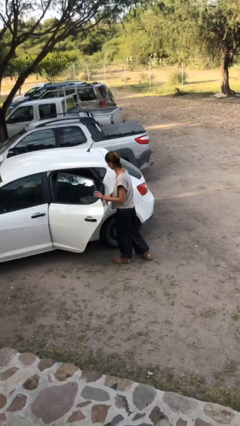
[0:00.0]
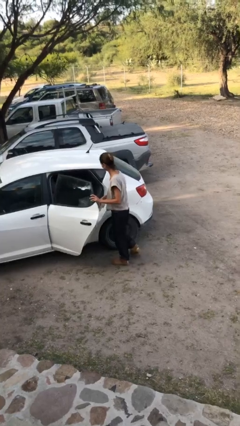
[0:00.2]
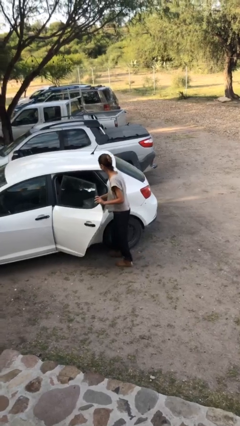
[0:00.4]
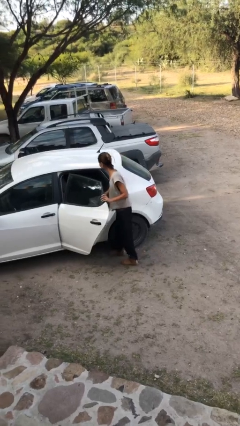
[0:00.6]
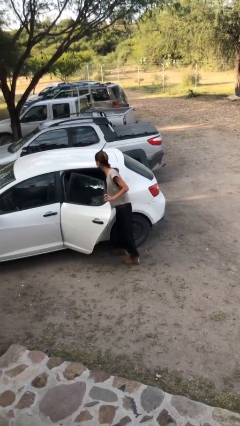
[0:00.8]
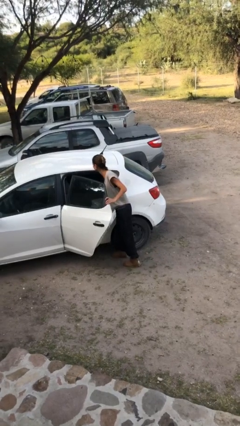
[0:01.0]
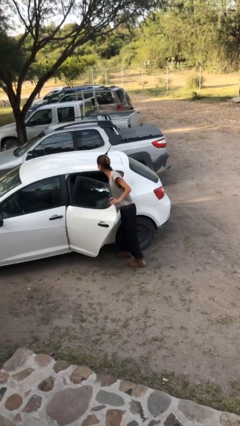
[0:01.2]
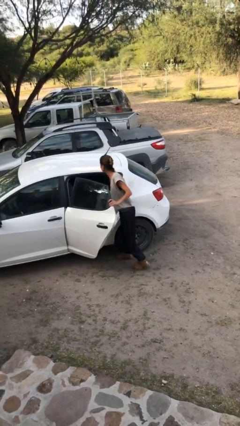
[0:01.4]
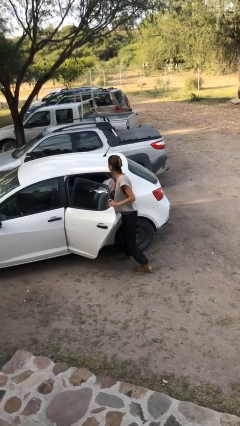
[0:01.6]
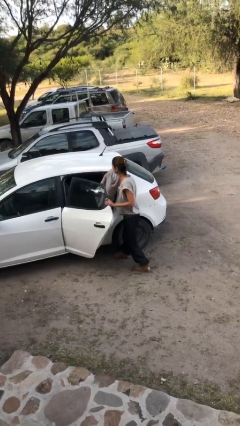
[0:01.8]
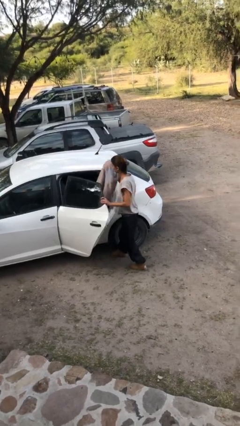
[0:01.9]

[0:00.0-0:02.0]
person unloads car

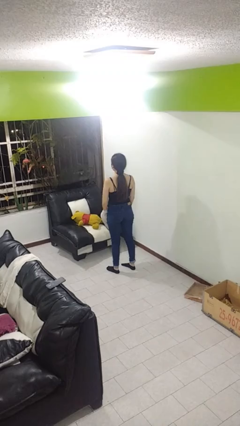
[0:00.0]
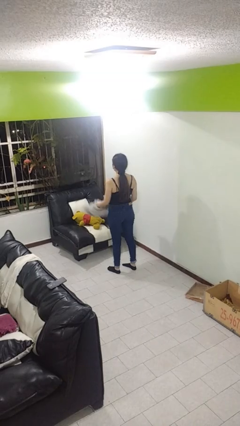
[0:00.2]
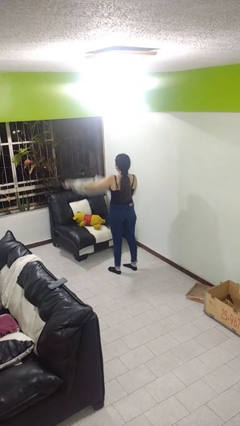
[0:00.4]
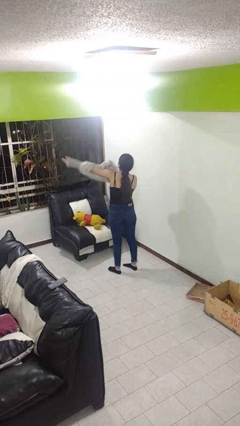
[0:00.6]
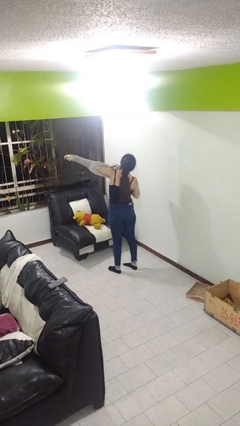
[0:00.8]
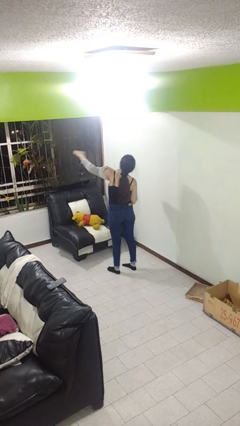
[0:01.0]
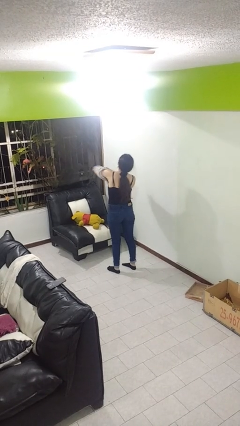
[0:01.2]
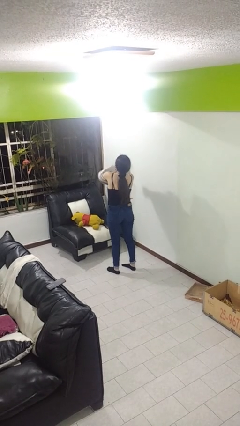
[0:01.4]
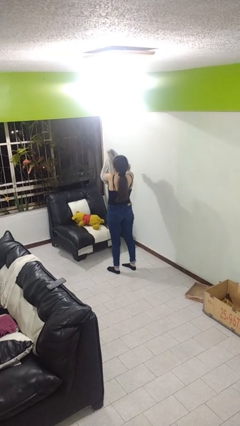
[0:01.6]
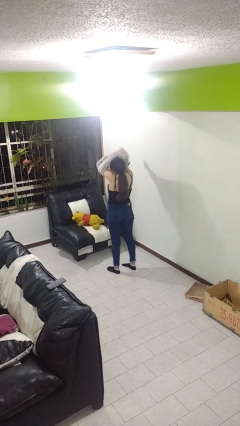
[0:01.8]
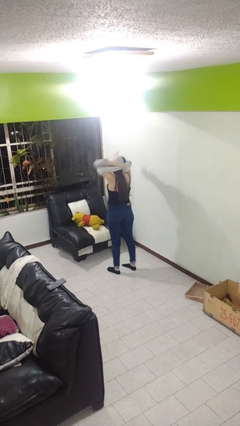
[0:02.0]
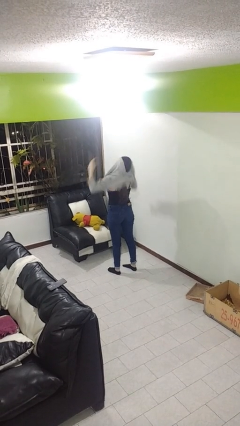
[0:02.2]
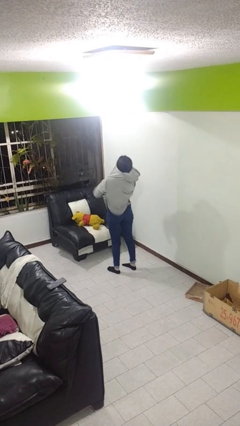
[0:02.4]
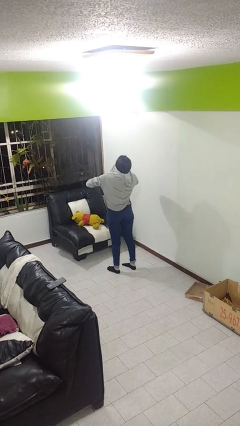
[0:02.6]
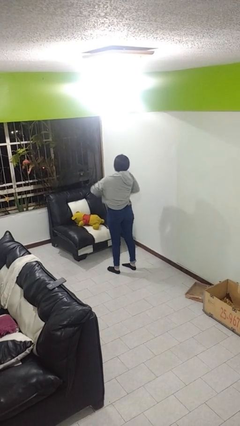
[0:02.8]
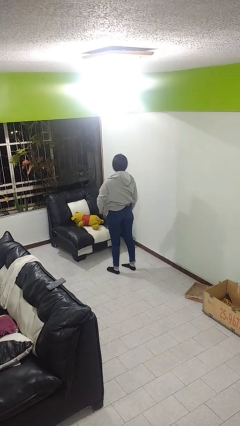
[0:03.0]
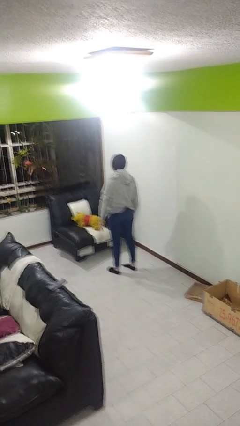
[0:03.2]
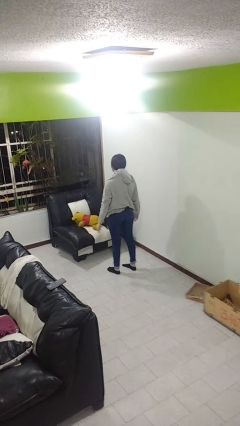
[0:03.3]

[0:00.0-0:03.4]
person puts on hoodie

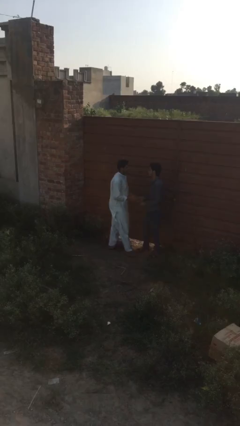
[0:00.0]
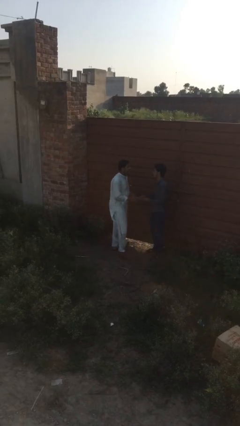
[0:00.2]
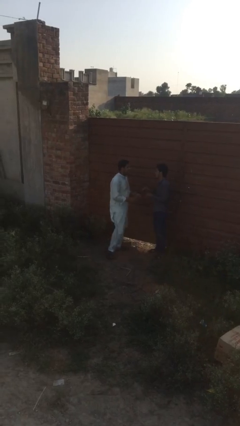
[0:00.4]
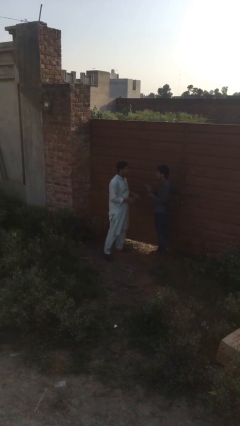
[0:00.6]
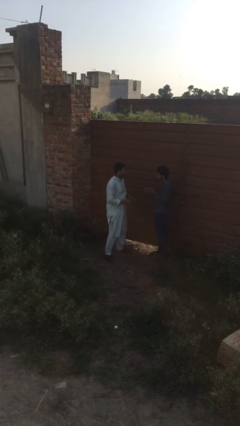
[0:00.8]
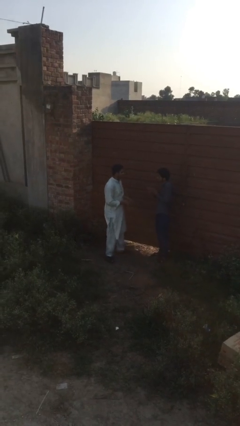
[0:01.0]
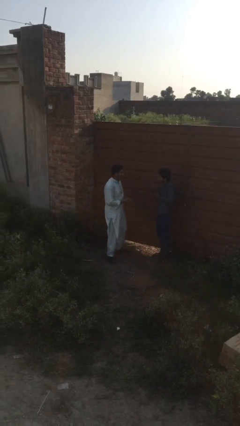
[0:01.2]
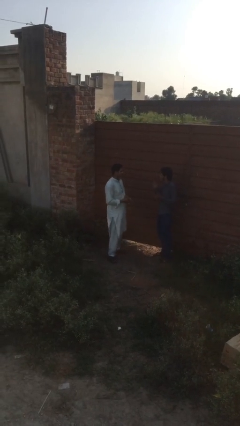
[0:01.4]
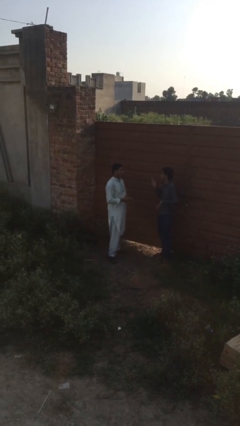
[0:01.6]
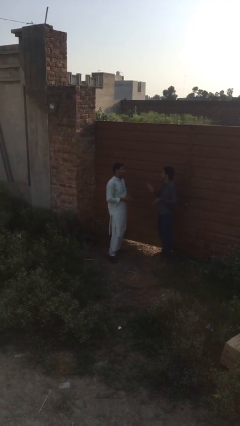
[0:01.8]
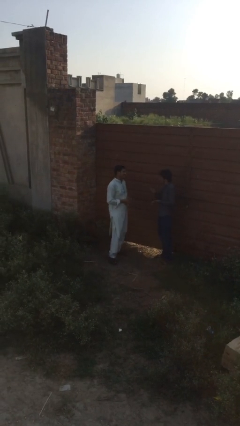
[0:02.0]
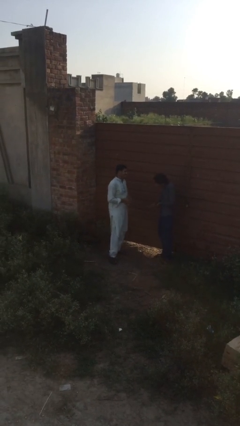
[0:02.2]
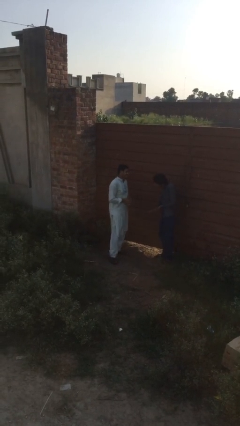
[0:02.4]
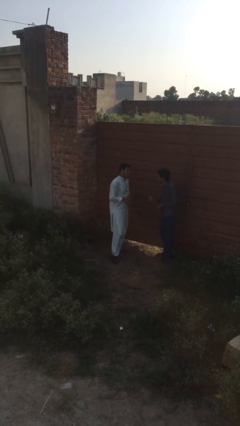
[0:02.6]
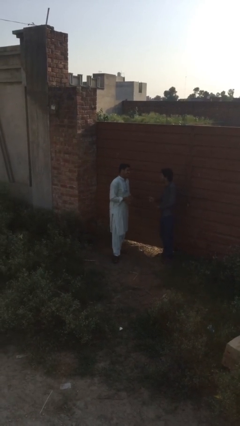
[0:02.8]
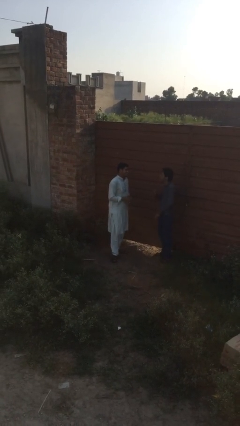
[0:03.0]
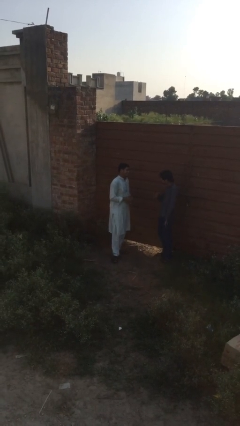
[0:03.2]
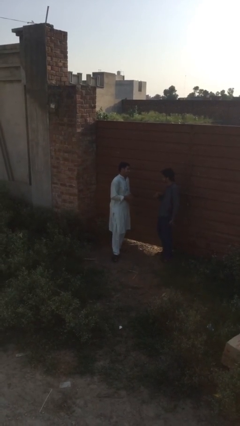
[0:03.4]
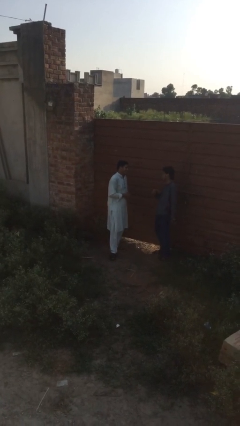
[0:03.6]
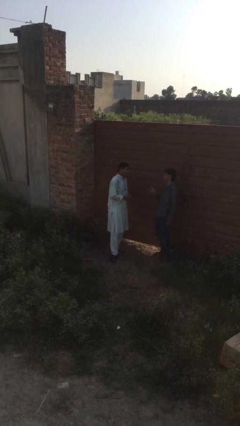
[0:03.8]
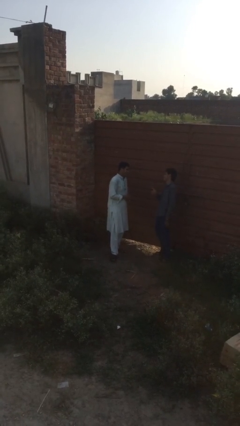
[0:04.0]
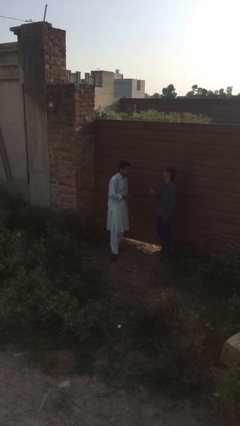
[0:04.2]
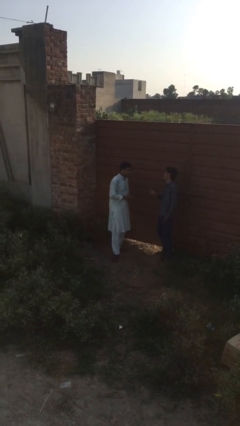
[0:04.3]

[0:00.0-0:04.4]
person talks to person

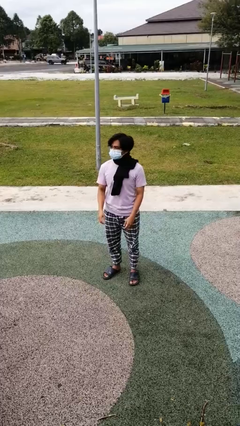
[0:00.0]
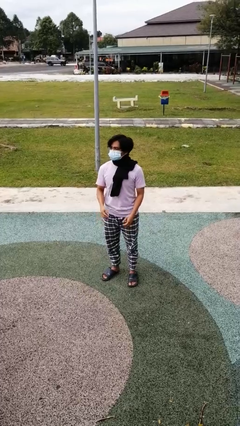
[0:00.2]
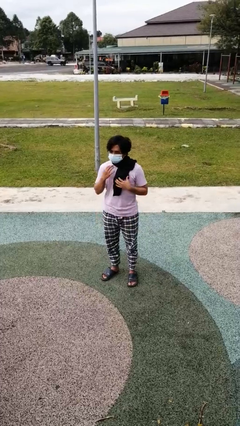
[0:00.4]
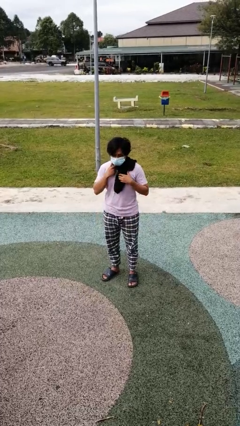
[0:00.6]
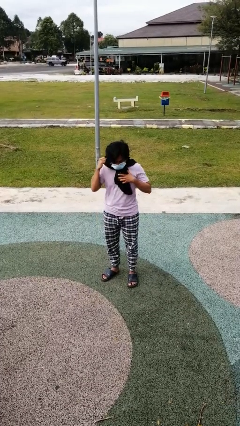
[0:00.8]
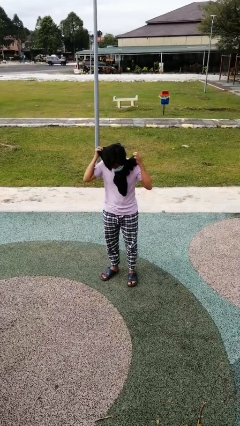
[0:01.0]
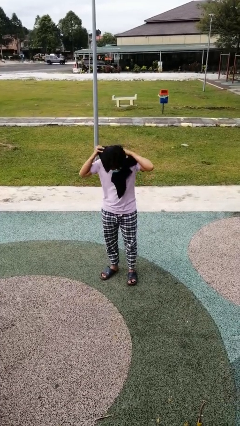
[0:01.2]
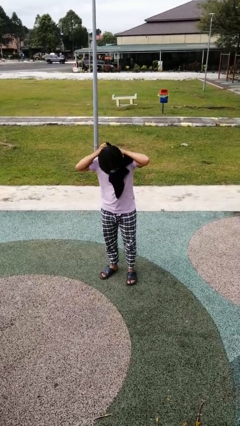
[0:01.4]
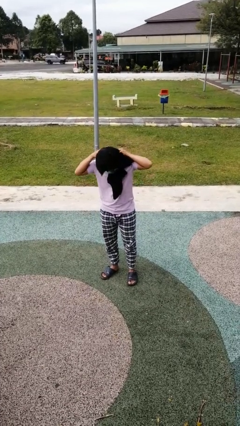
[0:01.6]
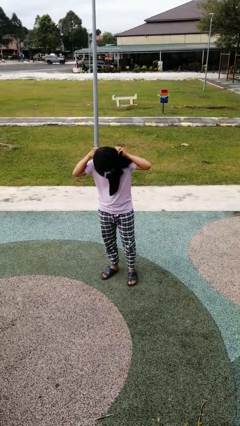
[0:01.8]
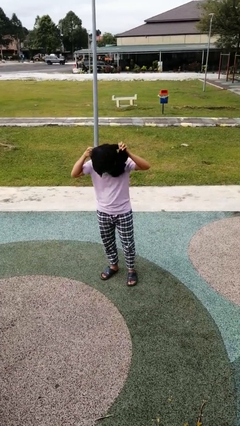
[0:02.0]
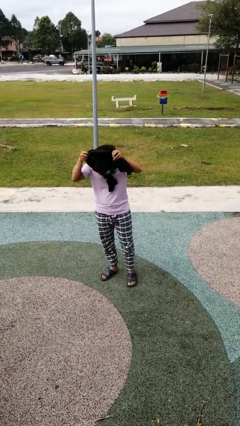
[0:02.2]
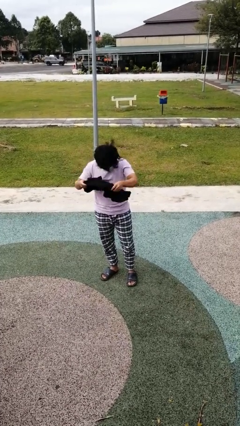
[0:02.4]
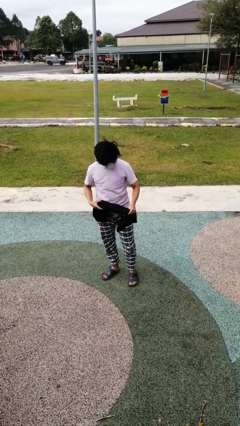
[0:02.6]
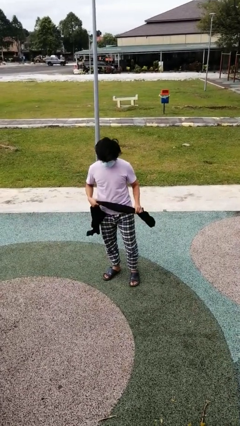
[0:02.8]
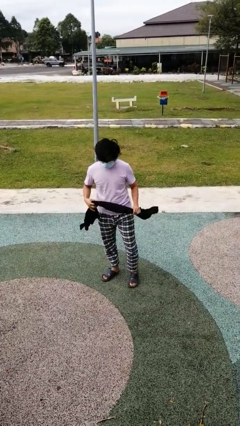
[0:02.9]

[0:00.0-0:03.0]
person takes off scarf

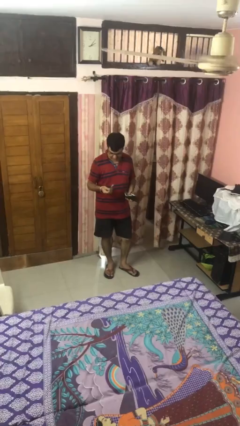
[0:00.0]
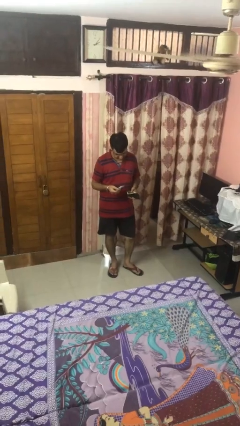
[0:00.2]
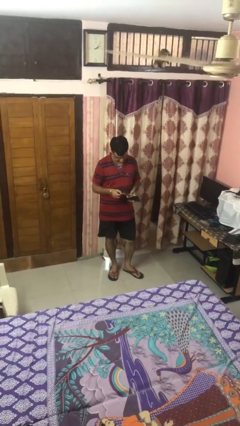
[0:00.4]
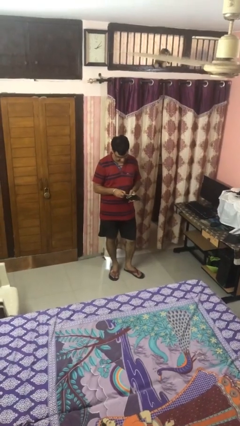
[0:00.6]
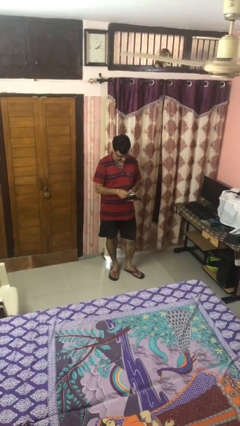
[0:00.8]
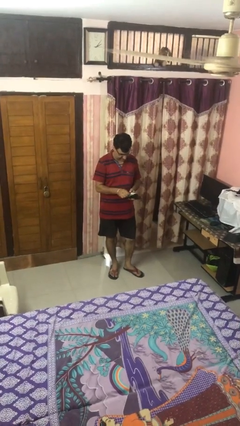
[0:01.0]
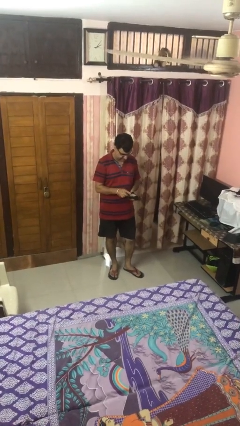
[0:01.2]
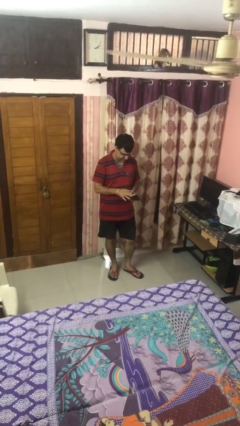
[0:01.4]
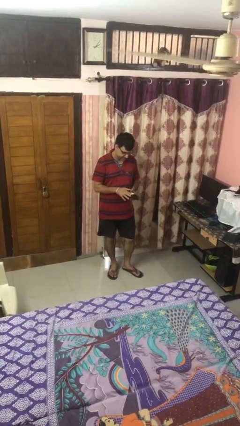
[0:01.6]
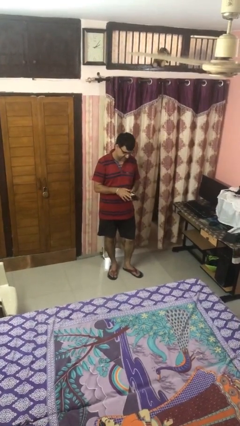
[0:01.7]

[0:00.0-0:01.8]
person puts object into purse

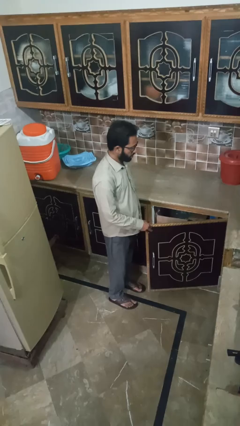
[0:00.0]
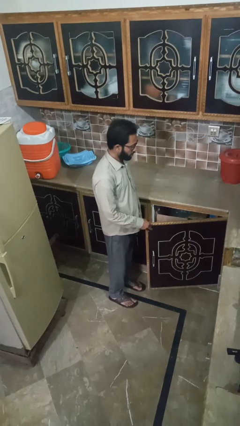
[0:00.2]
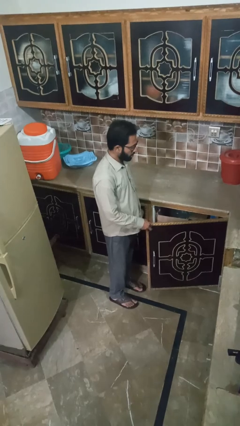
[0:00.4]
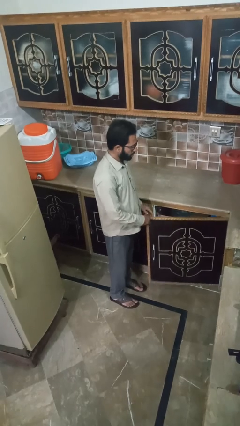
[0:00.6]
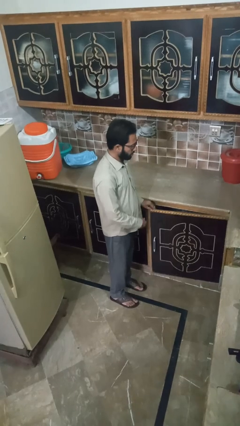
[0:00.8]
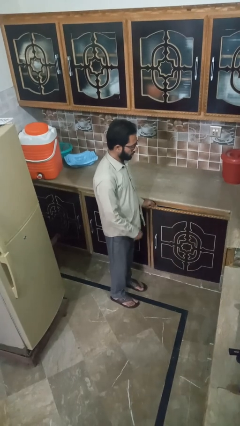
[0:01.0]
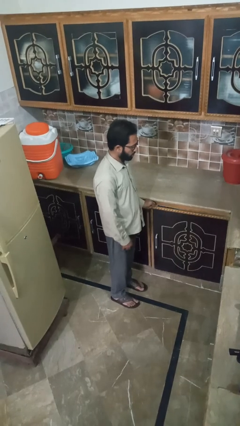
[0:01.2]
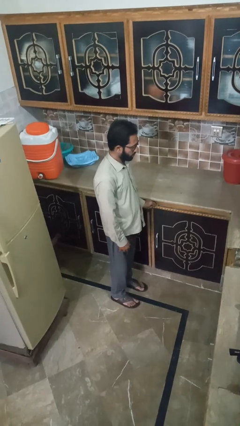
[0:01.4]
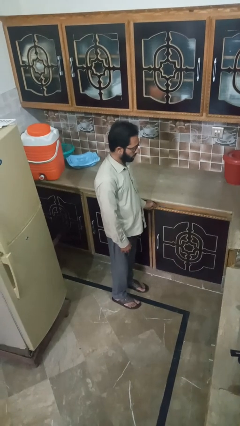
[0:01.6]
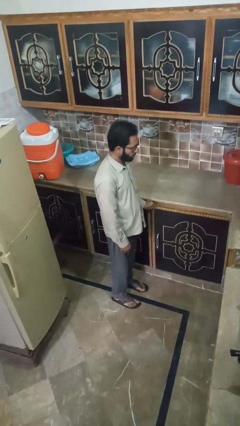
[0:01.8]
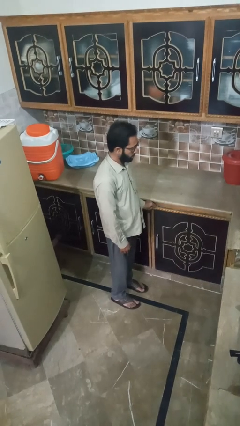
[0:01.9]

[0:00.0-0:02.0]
person closes cabinet

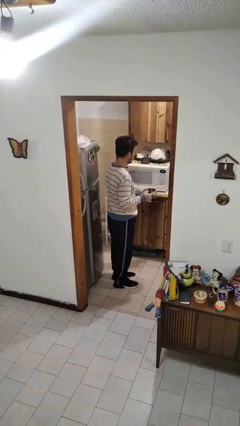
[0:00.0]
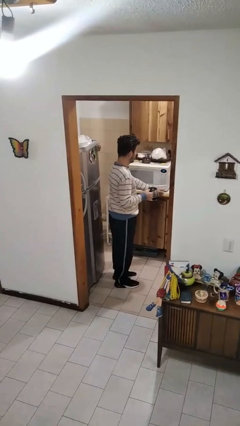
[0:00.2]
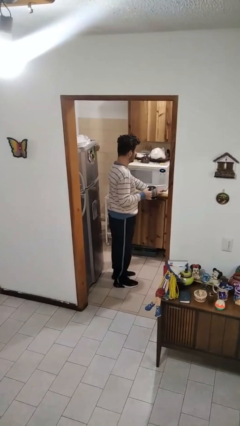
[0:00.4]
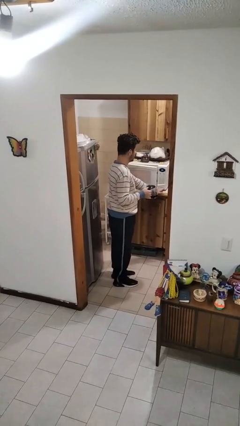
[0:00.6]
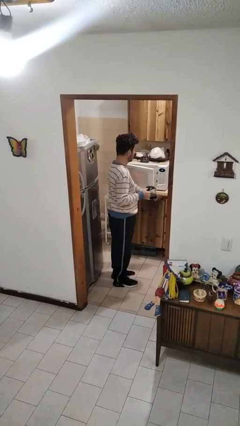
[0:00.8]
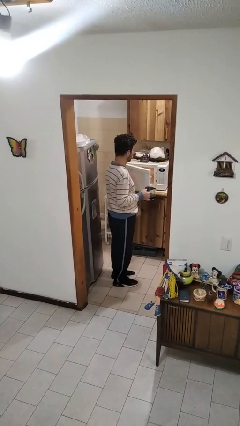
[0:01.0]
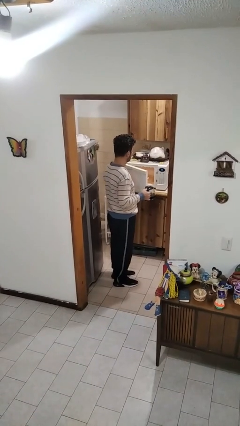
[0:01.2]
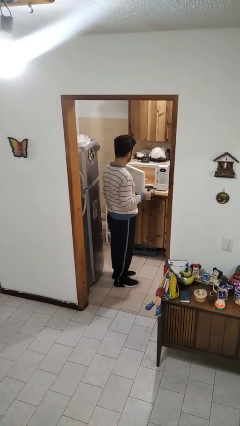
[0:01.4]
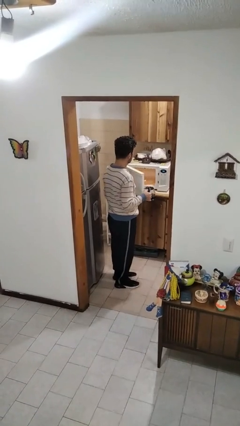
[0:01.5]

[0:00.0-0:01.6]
person opens microwave
